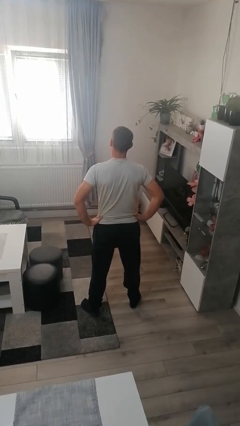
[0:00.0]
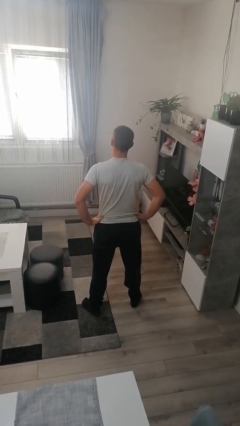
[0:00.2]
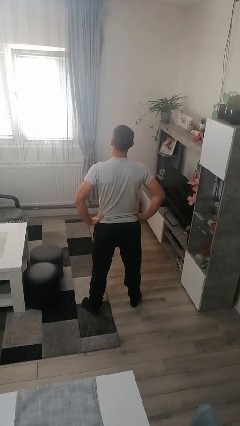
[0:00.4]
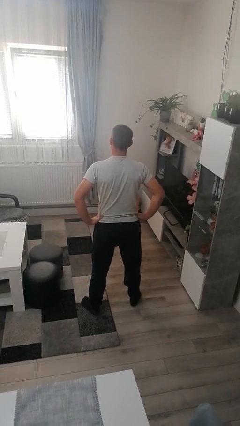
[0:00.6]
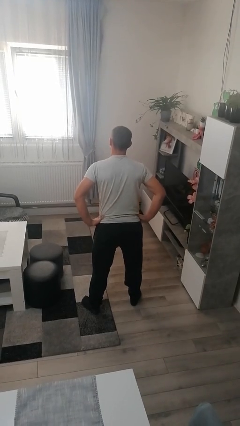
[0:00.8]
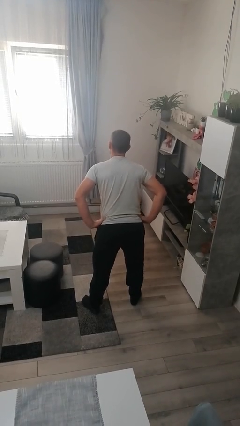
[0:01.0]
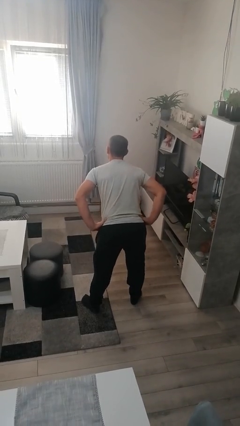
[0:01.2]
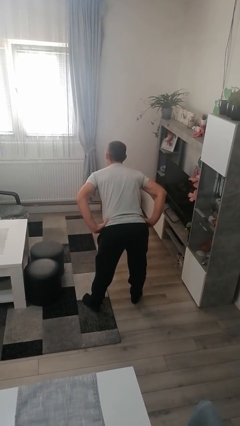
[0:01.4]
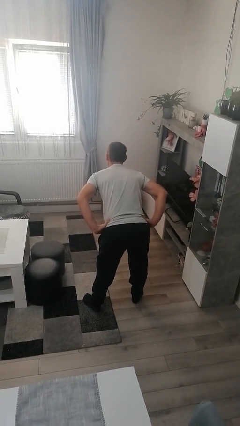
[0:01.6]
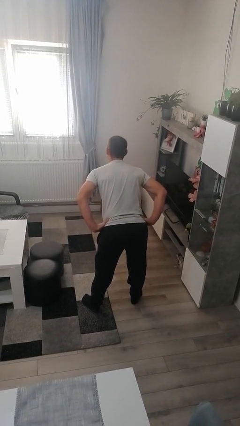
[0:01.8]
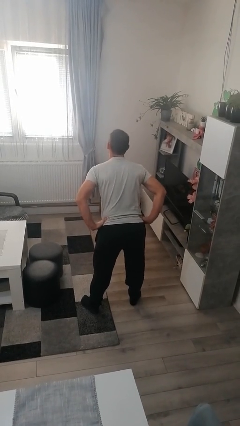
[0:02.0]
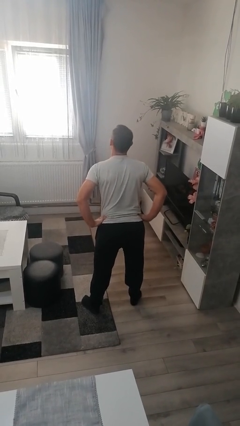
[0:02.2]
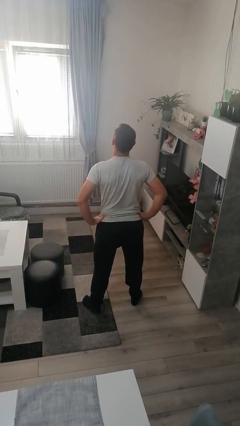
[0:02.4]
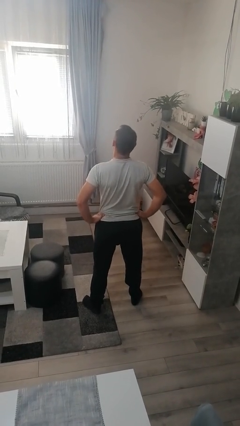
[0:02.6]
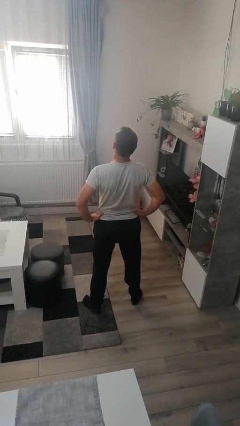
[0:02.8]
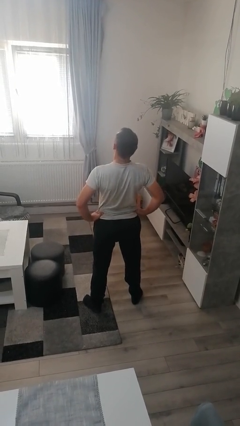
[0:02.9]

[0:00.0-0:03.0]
person wiggles hips

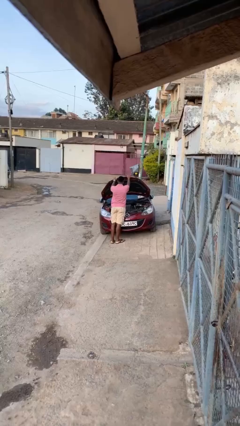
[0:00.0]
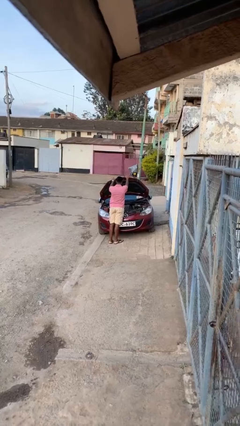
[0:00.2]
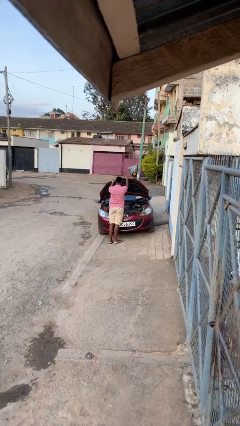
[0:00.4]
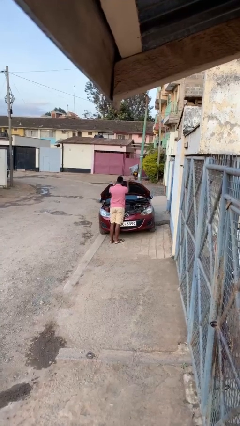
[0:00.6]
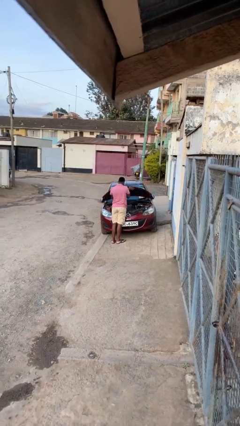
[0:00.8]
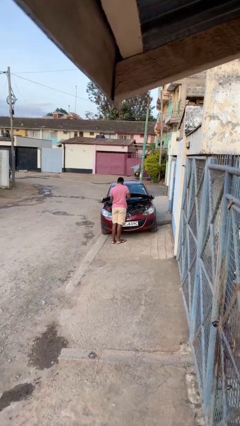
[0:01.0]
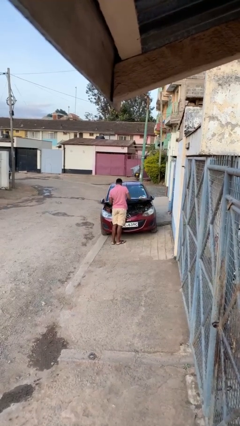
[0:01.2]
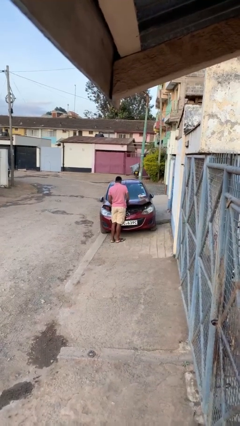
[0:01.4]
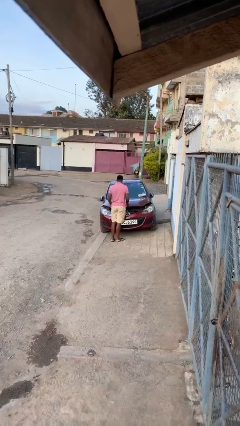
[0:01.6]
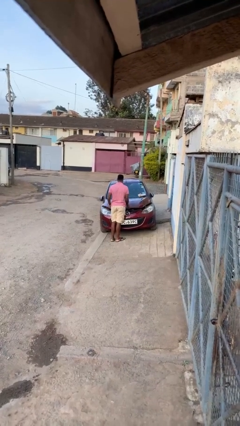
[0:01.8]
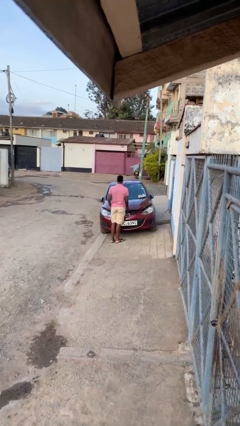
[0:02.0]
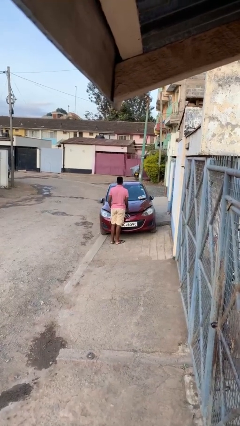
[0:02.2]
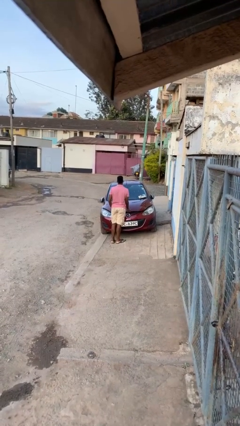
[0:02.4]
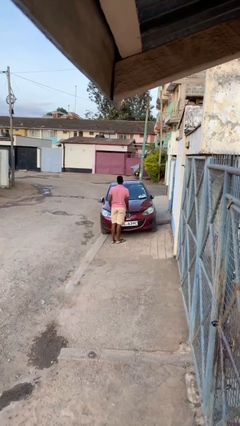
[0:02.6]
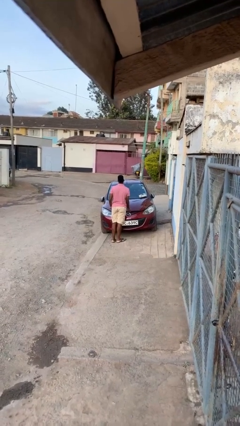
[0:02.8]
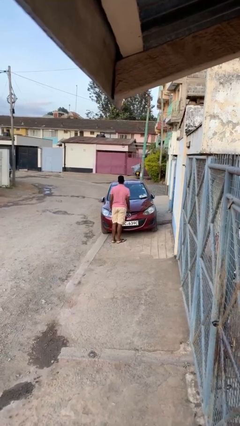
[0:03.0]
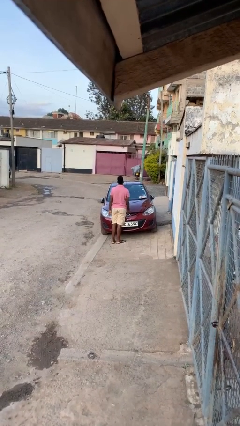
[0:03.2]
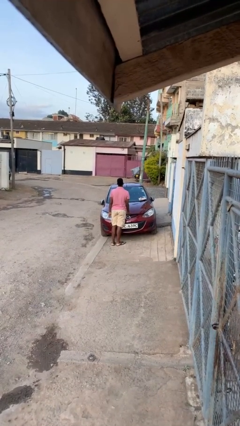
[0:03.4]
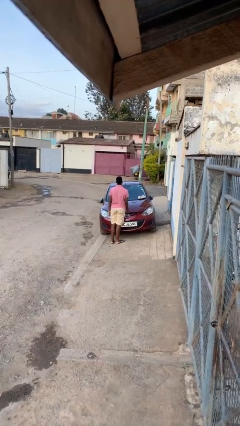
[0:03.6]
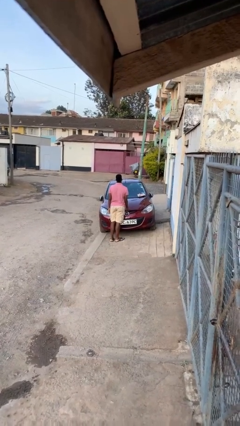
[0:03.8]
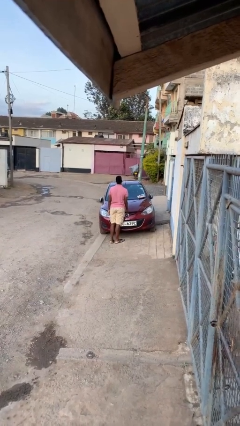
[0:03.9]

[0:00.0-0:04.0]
person closes car hood

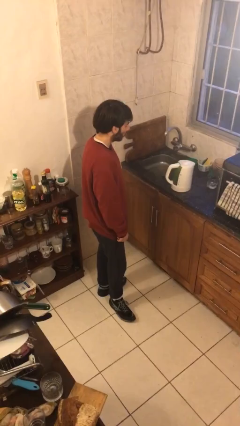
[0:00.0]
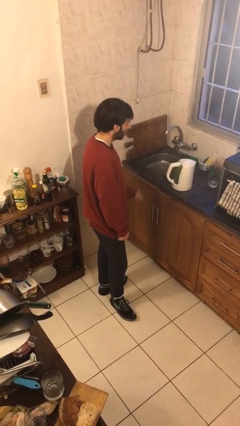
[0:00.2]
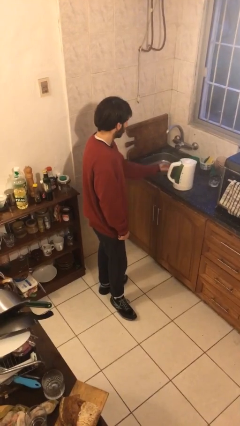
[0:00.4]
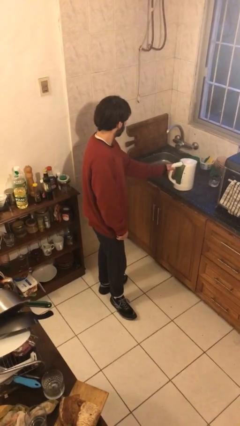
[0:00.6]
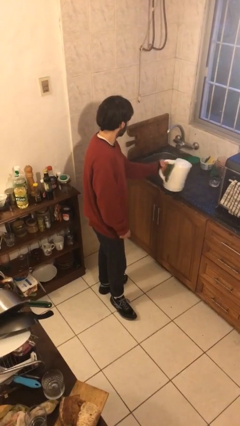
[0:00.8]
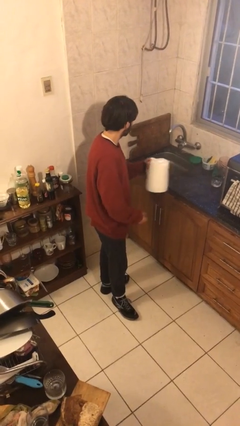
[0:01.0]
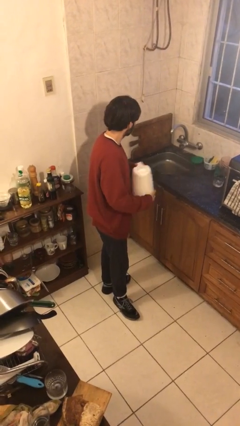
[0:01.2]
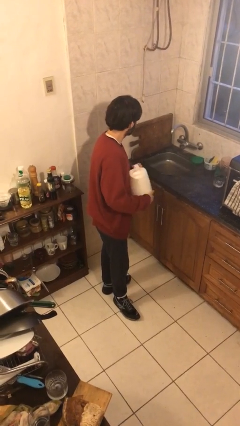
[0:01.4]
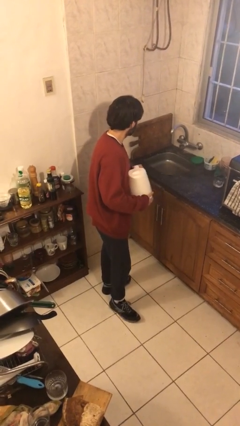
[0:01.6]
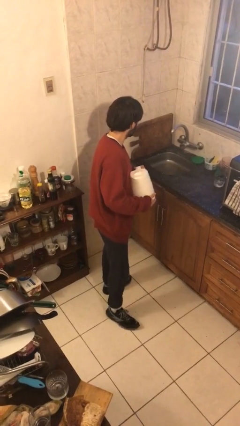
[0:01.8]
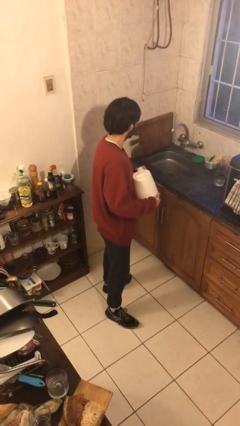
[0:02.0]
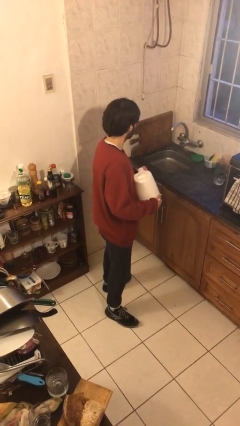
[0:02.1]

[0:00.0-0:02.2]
person picks up object from countertop

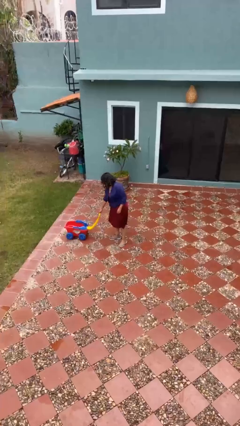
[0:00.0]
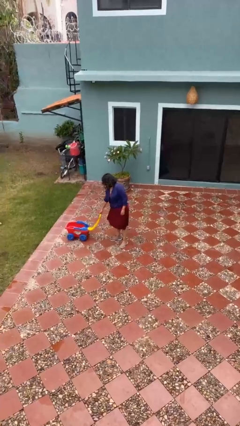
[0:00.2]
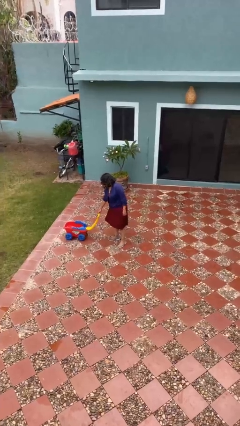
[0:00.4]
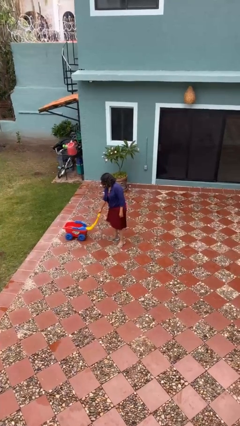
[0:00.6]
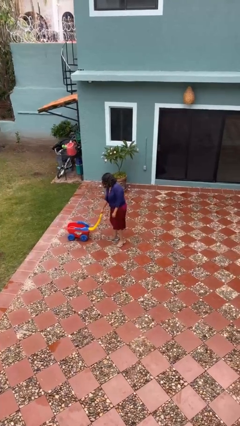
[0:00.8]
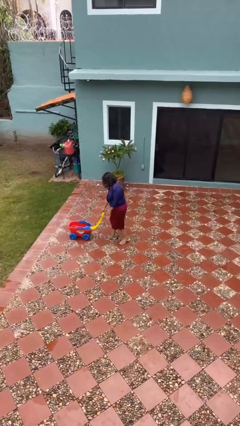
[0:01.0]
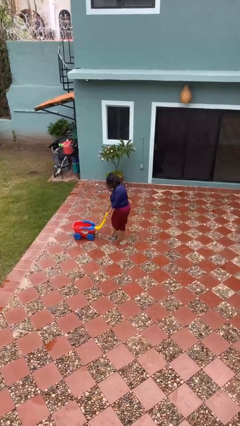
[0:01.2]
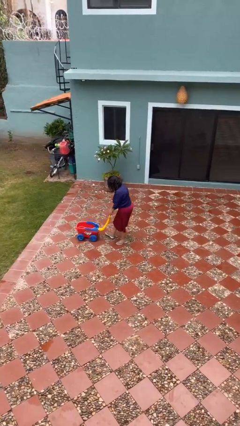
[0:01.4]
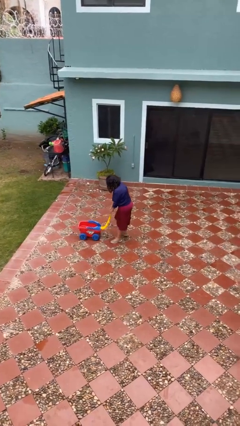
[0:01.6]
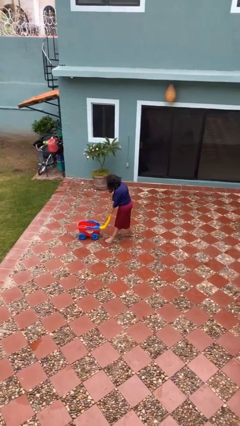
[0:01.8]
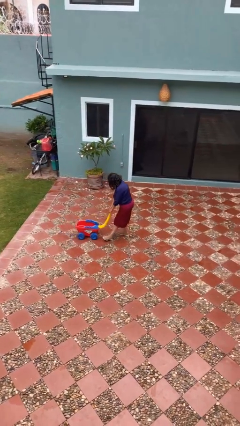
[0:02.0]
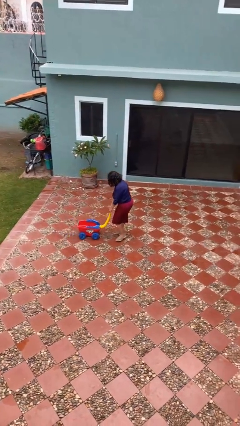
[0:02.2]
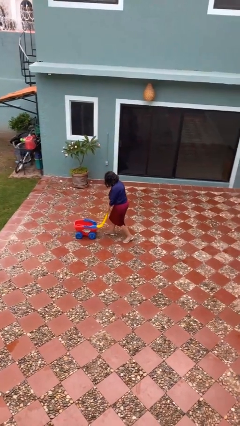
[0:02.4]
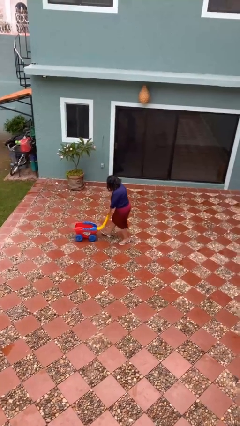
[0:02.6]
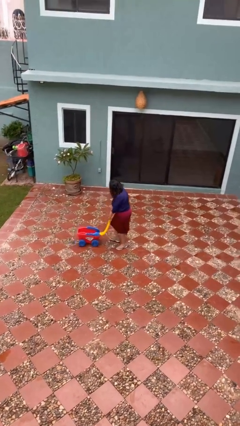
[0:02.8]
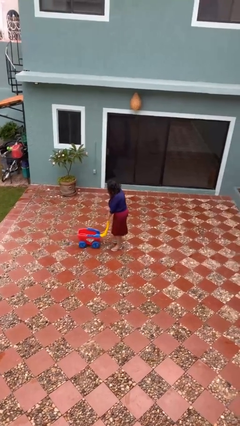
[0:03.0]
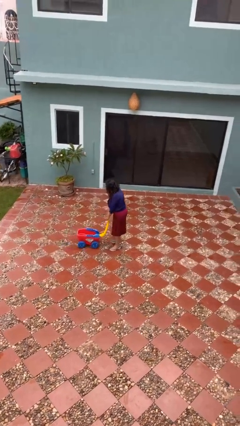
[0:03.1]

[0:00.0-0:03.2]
person pulls wheeled cart

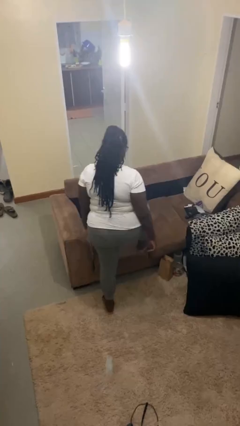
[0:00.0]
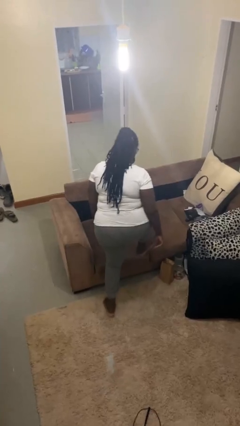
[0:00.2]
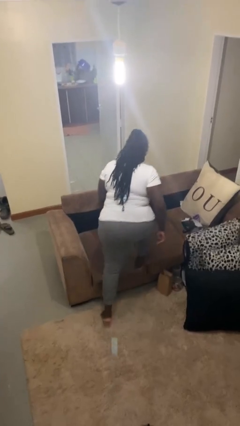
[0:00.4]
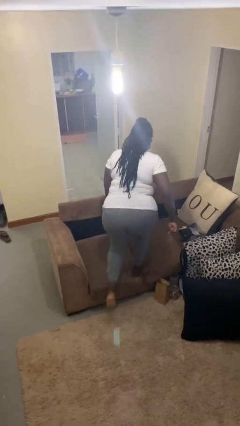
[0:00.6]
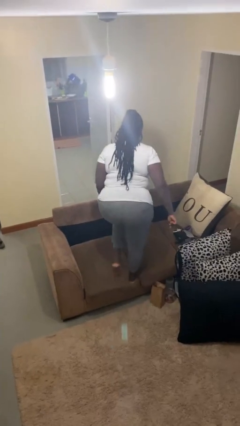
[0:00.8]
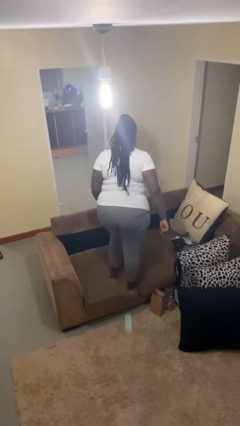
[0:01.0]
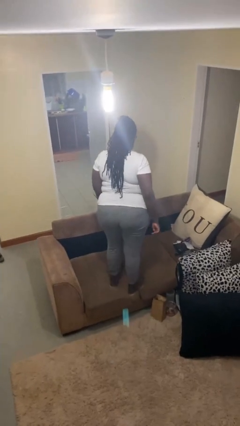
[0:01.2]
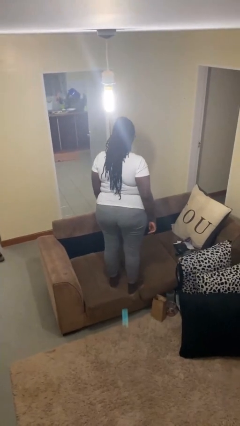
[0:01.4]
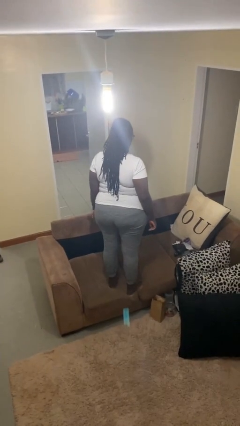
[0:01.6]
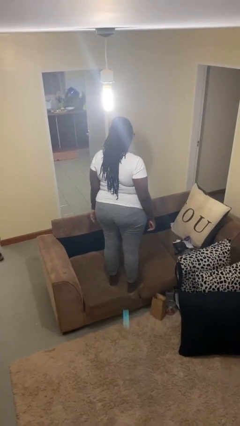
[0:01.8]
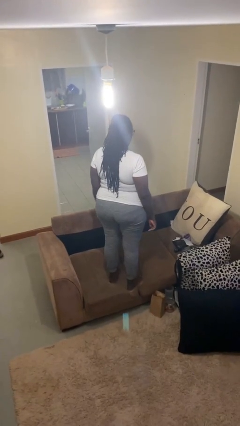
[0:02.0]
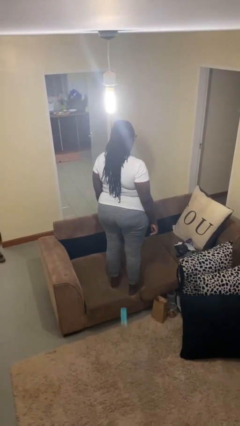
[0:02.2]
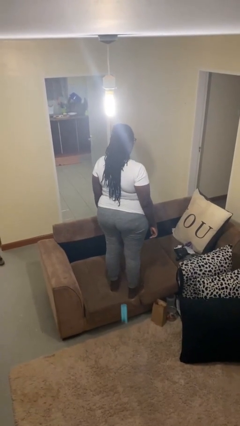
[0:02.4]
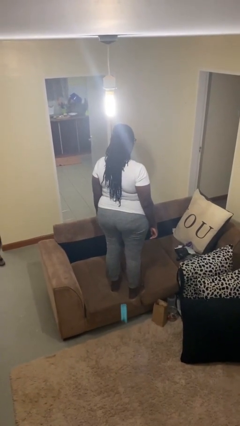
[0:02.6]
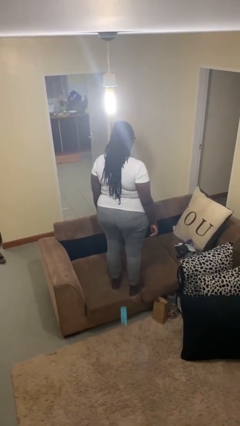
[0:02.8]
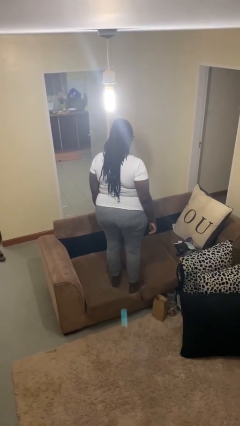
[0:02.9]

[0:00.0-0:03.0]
person climbs on couch

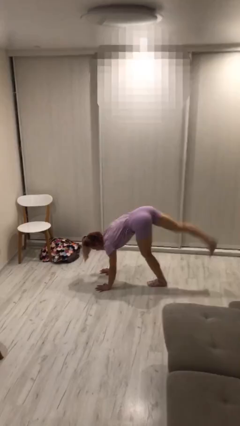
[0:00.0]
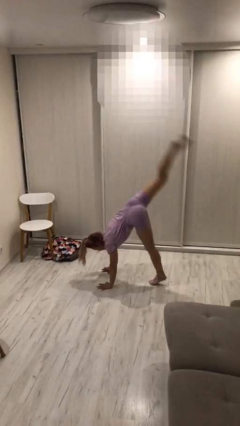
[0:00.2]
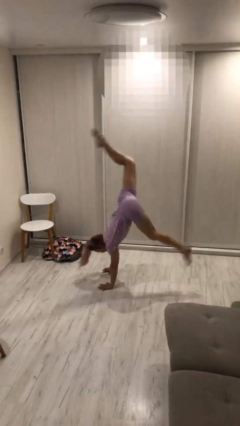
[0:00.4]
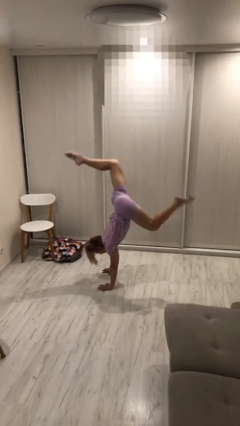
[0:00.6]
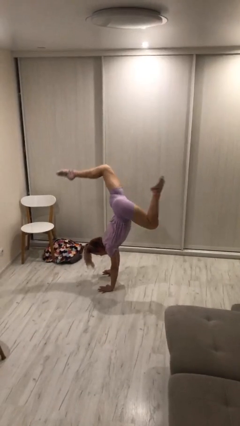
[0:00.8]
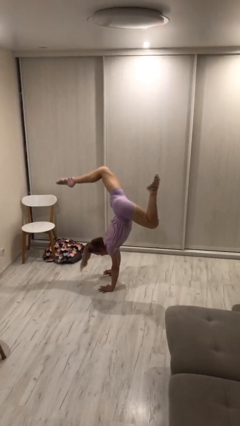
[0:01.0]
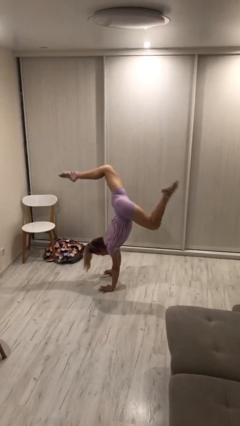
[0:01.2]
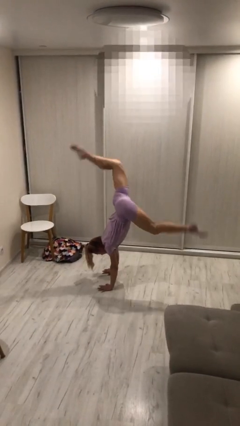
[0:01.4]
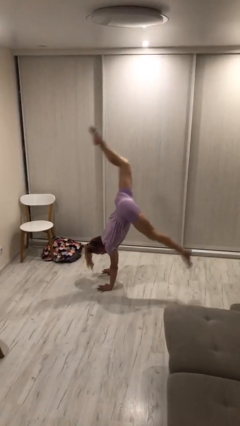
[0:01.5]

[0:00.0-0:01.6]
person handstand

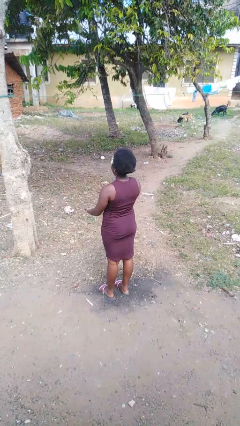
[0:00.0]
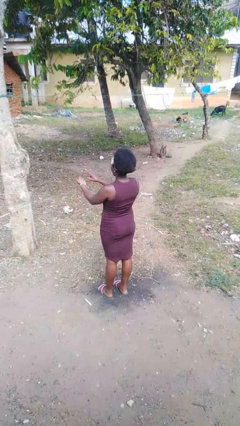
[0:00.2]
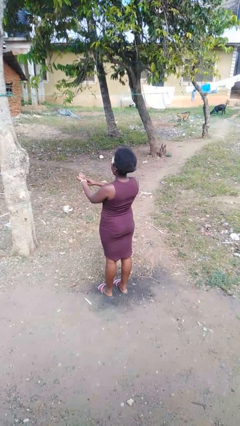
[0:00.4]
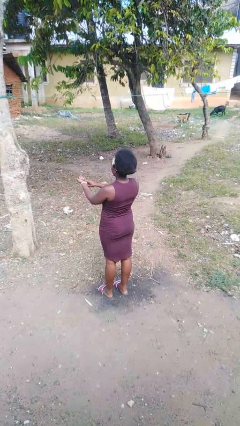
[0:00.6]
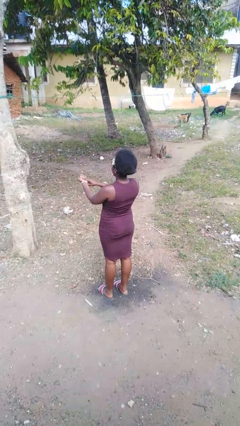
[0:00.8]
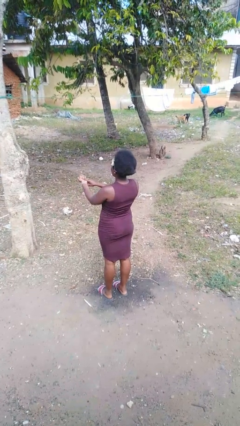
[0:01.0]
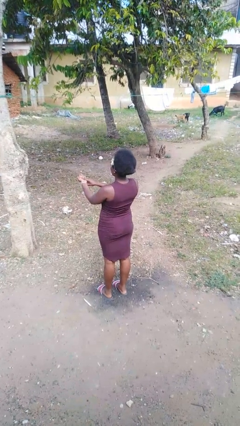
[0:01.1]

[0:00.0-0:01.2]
person gestures number one
